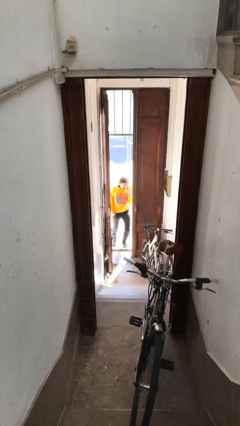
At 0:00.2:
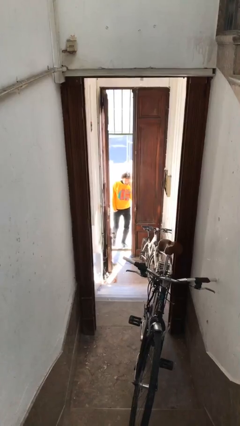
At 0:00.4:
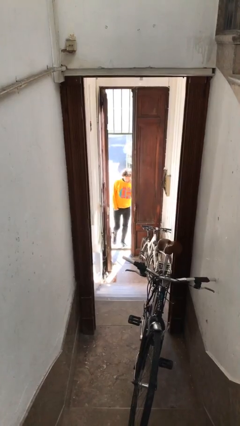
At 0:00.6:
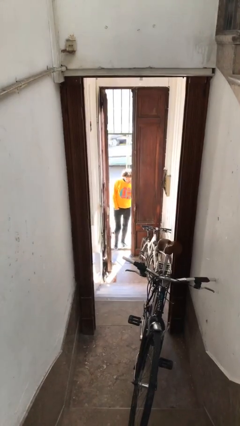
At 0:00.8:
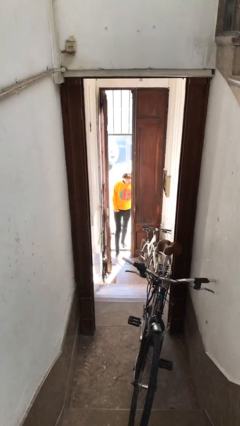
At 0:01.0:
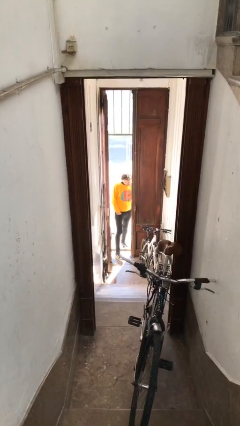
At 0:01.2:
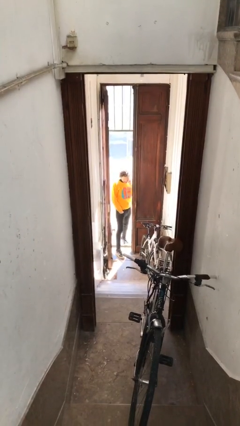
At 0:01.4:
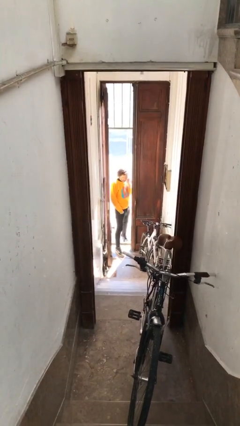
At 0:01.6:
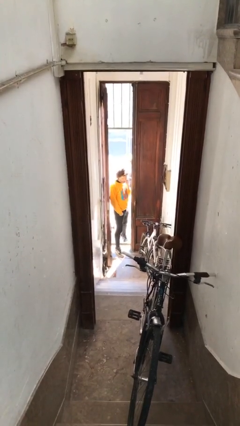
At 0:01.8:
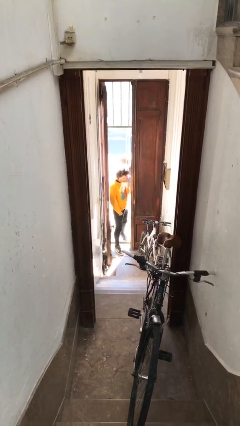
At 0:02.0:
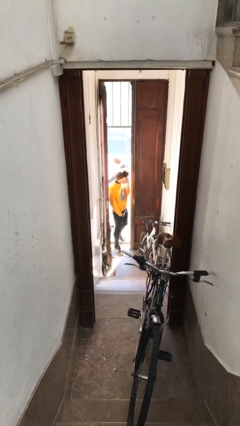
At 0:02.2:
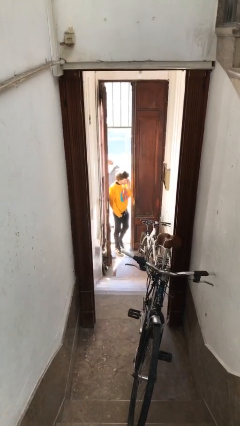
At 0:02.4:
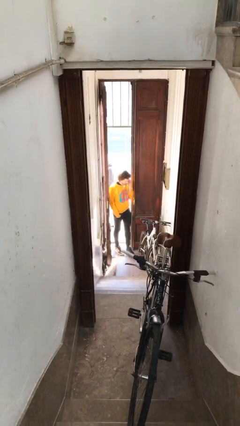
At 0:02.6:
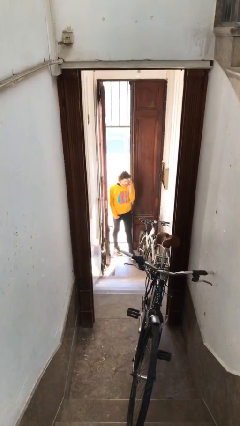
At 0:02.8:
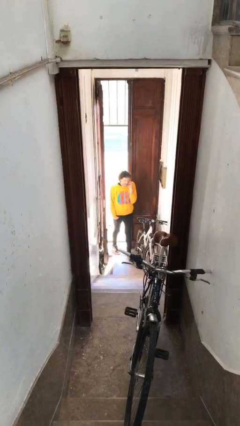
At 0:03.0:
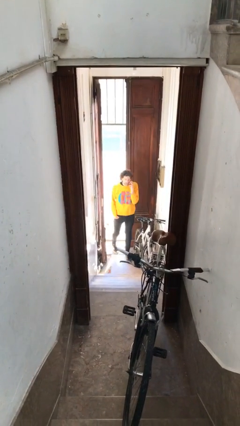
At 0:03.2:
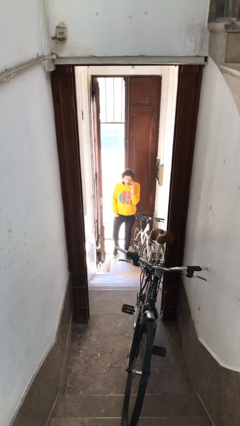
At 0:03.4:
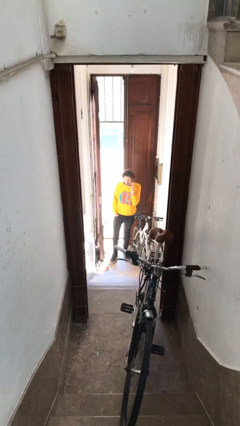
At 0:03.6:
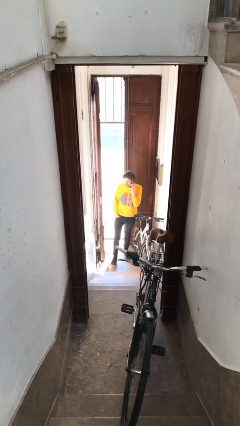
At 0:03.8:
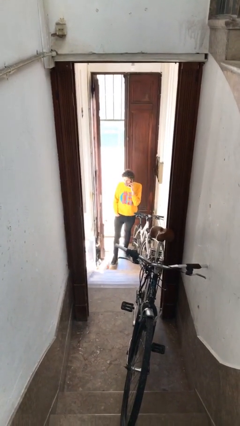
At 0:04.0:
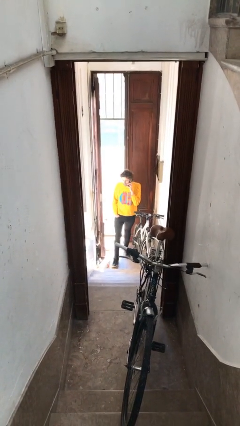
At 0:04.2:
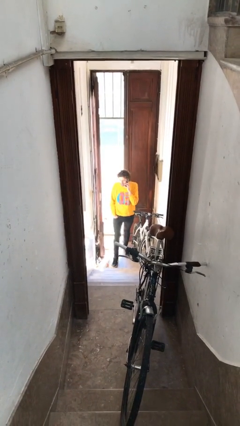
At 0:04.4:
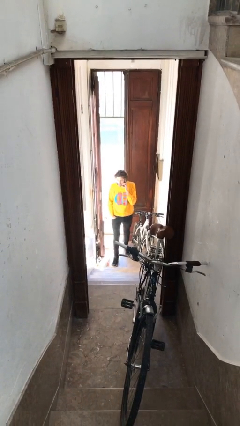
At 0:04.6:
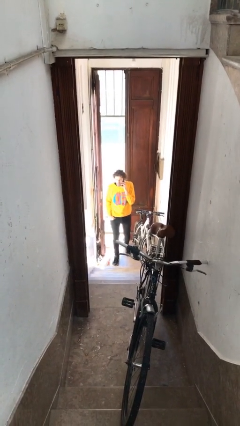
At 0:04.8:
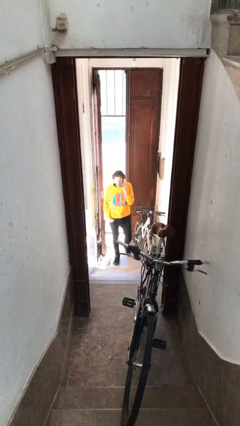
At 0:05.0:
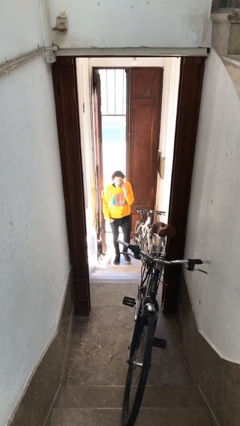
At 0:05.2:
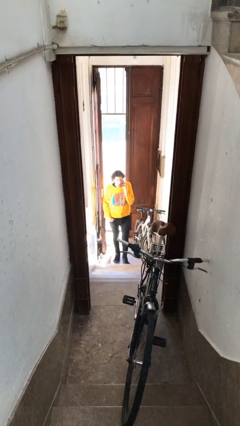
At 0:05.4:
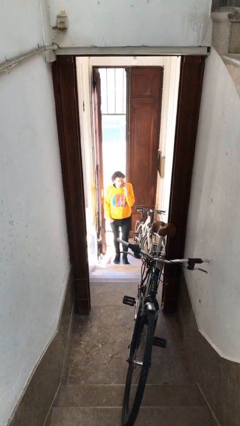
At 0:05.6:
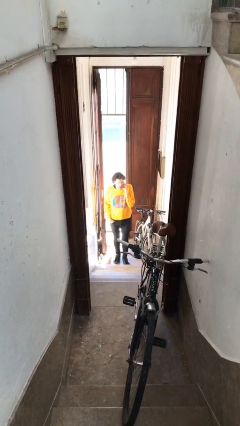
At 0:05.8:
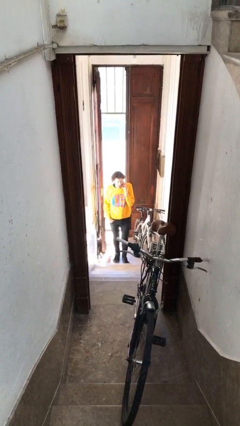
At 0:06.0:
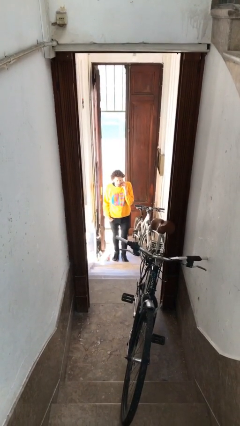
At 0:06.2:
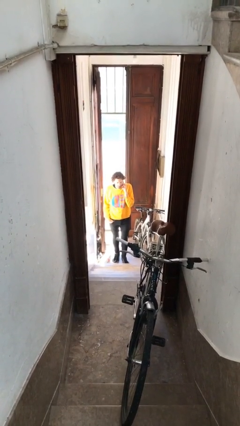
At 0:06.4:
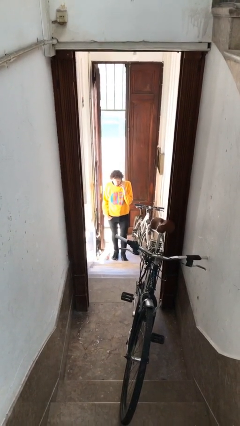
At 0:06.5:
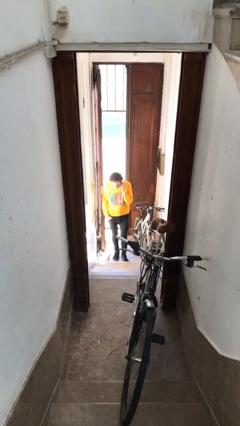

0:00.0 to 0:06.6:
person enters scene through structure

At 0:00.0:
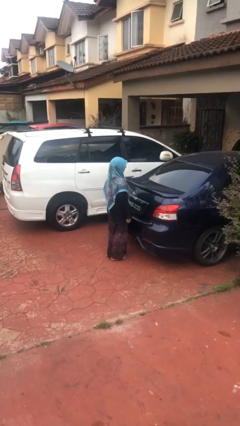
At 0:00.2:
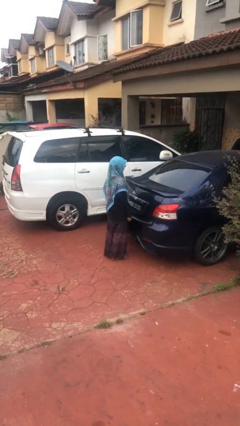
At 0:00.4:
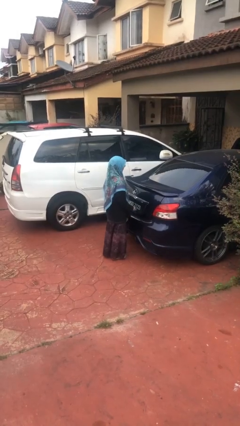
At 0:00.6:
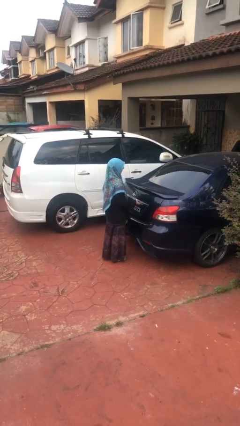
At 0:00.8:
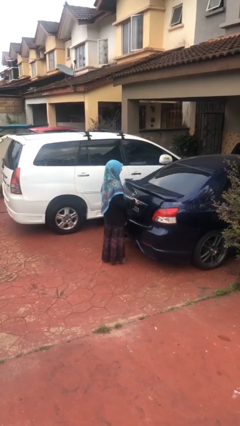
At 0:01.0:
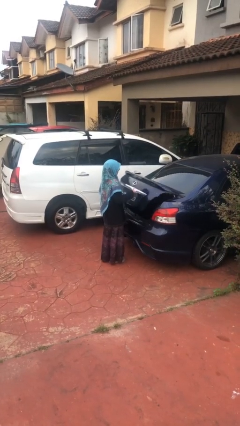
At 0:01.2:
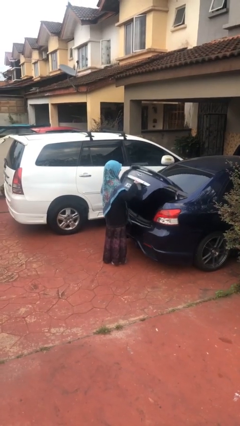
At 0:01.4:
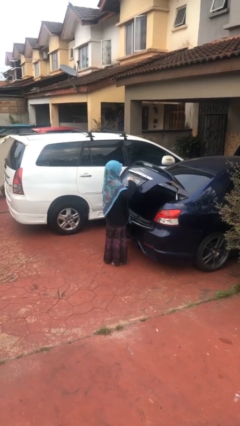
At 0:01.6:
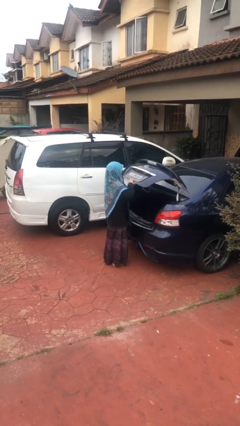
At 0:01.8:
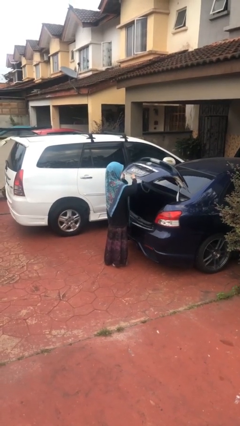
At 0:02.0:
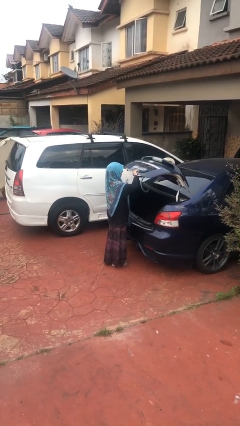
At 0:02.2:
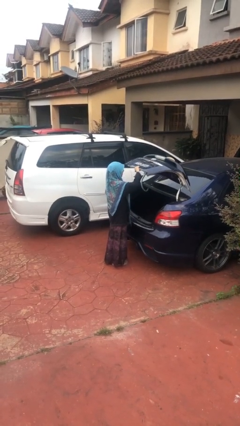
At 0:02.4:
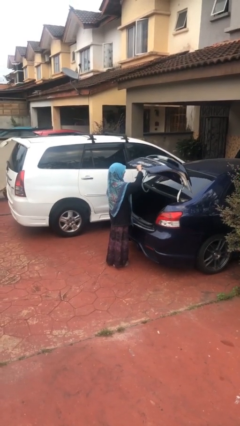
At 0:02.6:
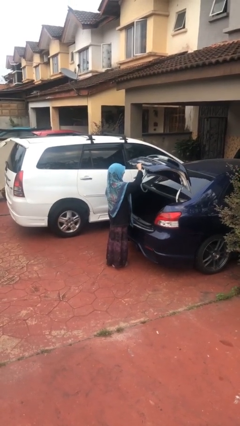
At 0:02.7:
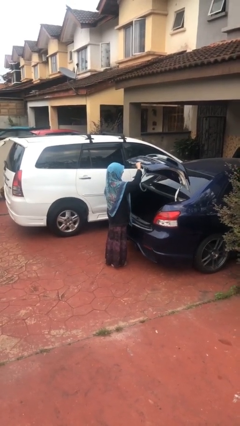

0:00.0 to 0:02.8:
person opens car trunk

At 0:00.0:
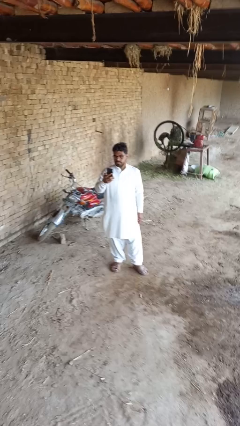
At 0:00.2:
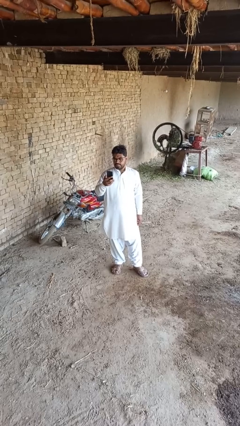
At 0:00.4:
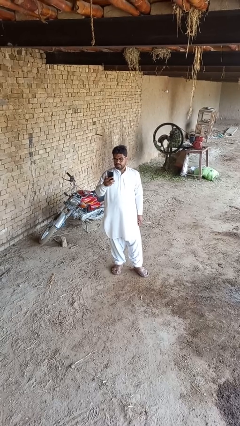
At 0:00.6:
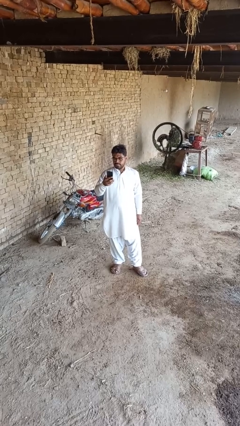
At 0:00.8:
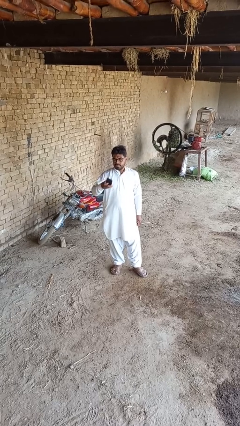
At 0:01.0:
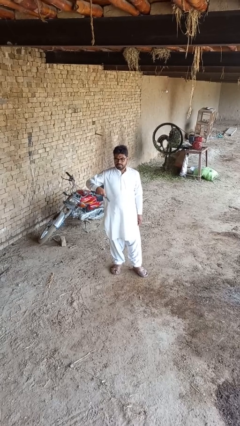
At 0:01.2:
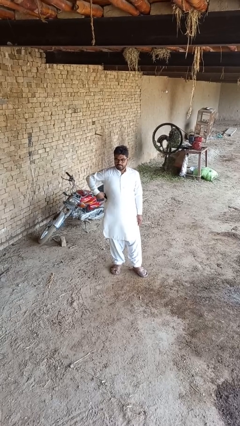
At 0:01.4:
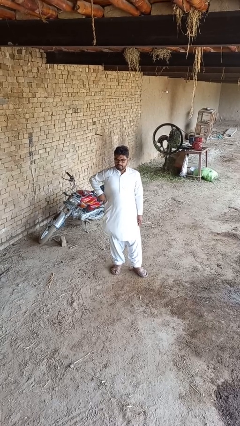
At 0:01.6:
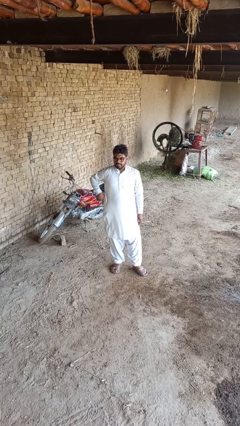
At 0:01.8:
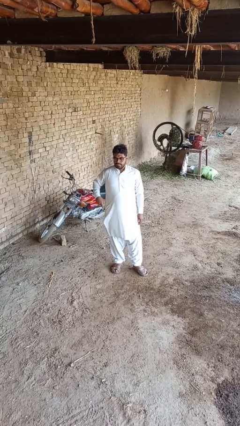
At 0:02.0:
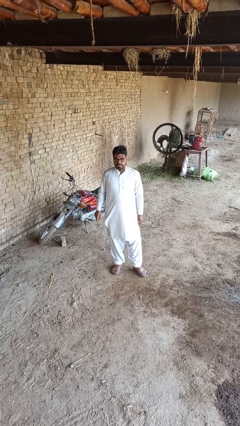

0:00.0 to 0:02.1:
person puts phone into pocket

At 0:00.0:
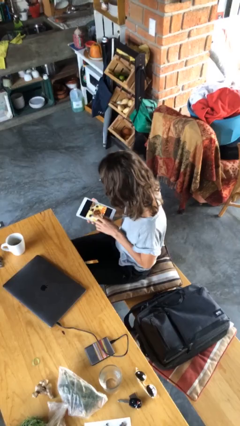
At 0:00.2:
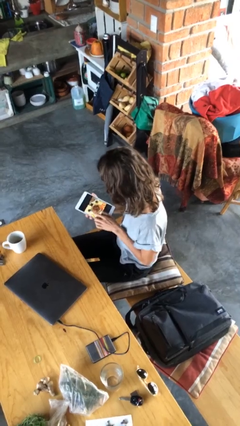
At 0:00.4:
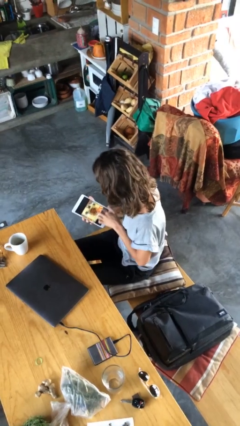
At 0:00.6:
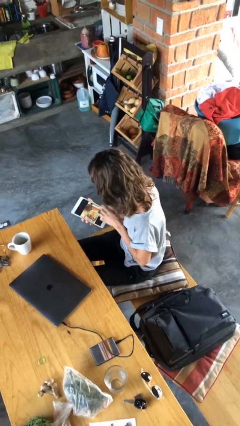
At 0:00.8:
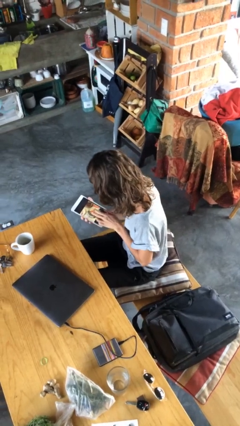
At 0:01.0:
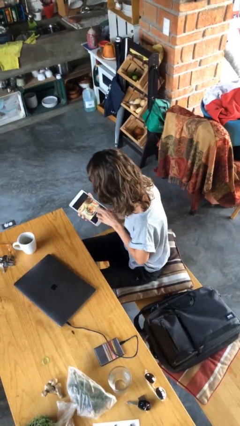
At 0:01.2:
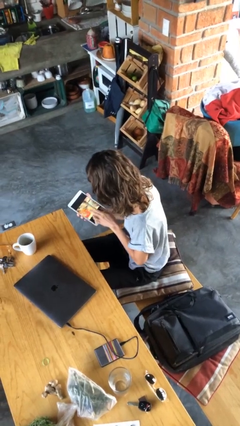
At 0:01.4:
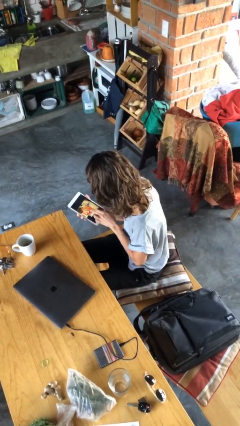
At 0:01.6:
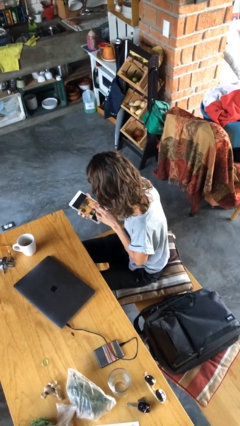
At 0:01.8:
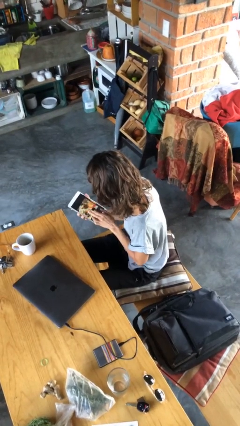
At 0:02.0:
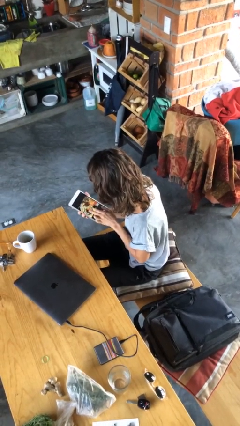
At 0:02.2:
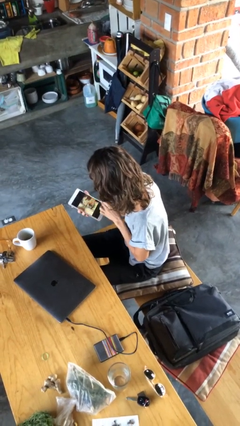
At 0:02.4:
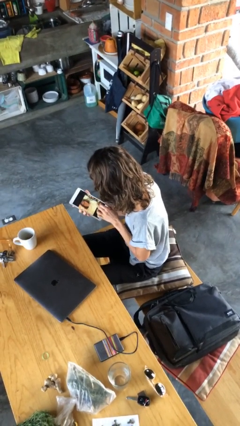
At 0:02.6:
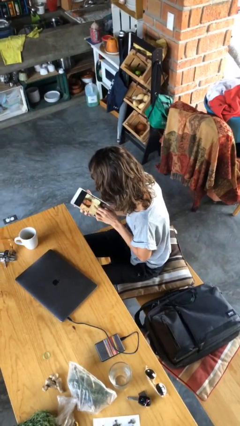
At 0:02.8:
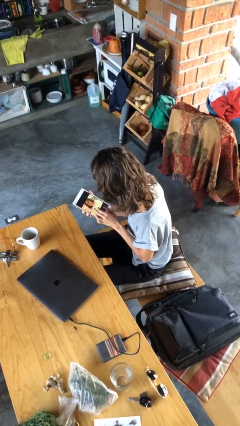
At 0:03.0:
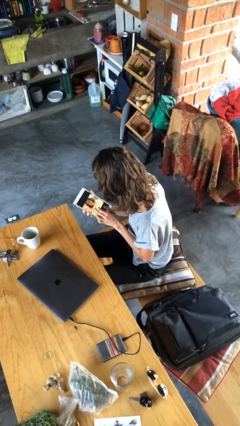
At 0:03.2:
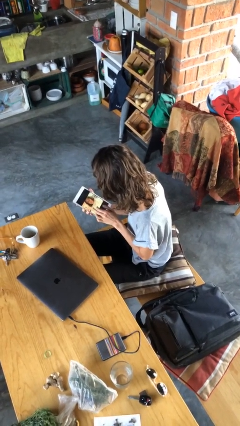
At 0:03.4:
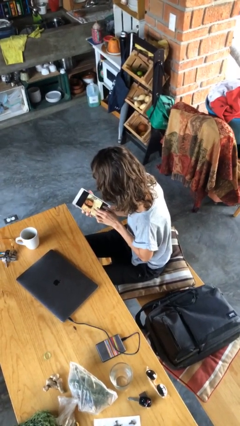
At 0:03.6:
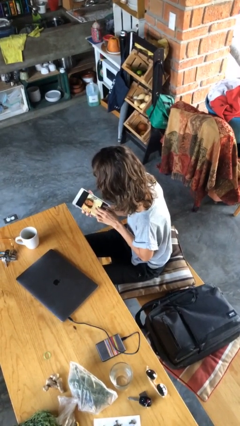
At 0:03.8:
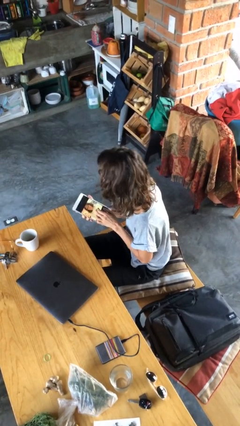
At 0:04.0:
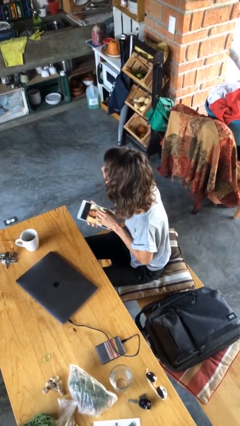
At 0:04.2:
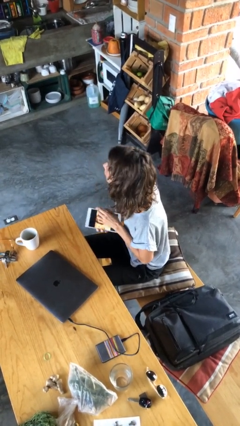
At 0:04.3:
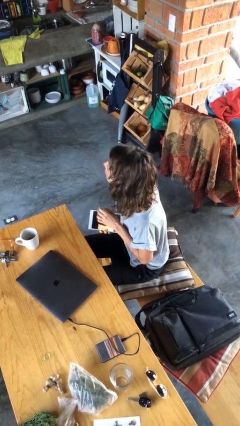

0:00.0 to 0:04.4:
person interacts with tablet

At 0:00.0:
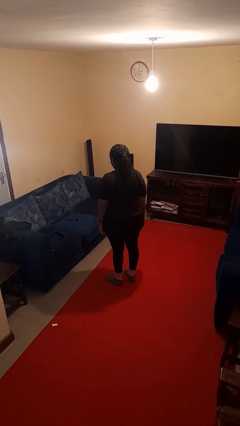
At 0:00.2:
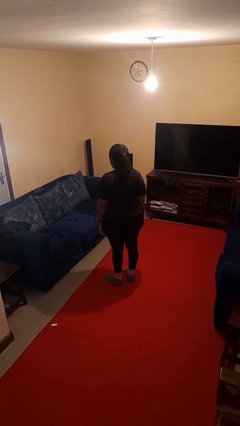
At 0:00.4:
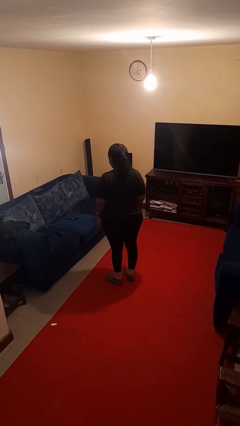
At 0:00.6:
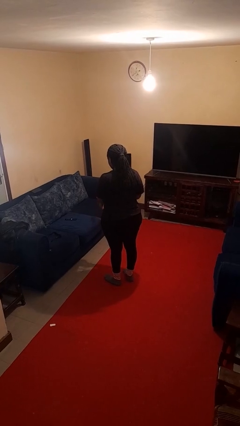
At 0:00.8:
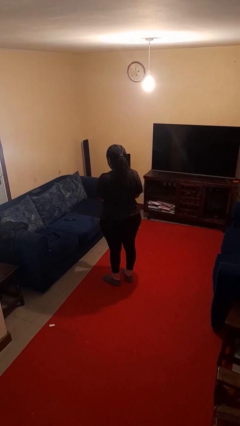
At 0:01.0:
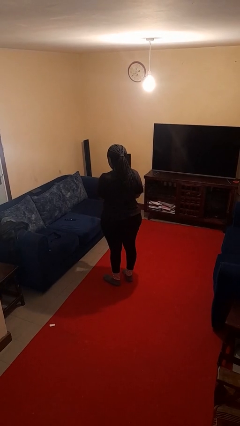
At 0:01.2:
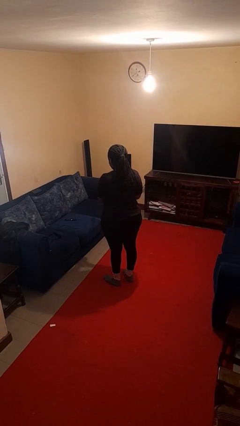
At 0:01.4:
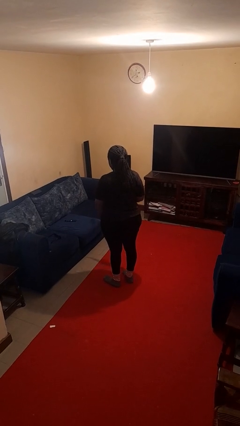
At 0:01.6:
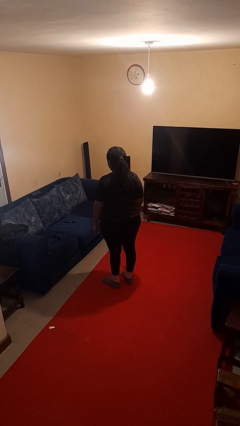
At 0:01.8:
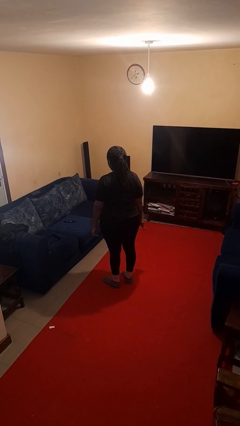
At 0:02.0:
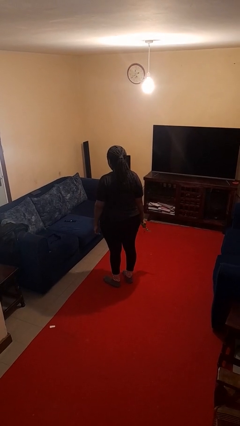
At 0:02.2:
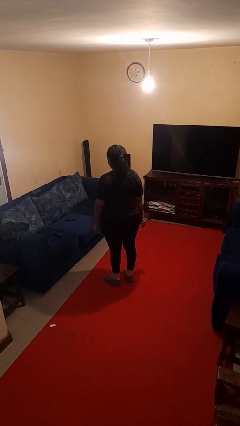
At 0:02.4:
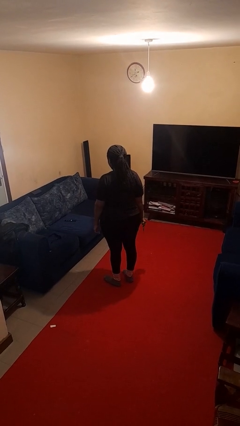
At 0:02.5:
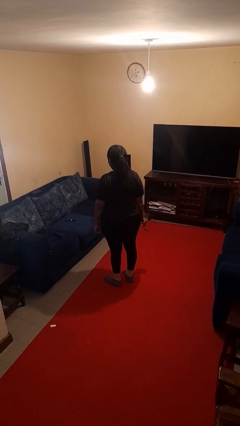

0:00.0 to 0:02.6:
person takes off wristwatch
